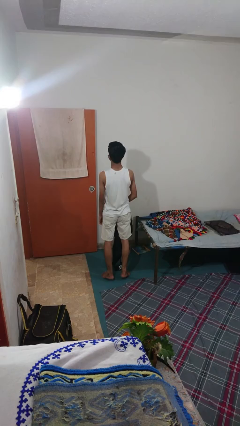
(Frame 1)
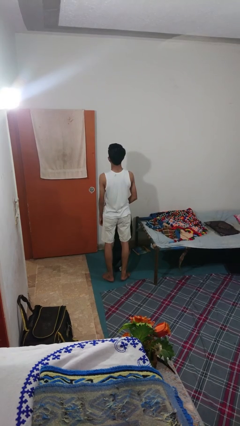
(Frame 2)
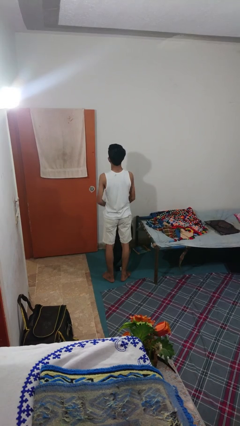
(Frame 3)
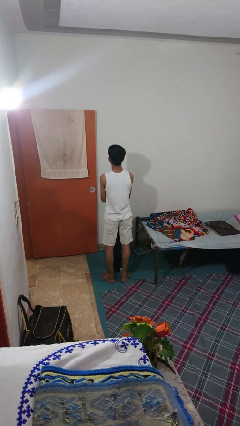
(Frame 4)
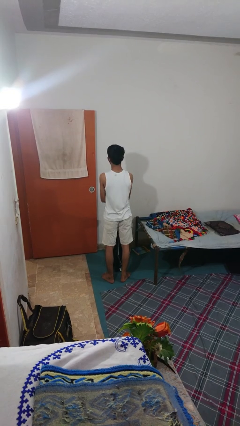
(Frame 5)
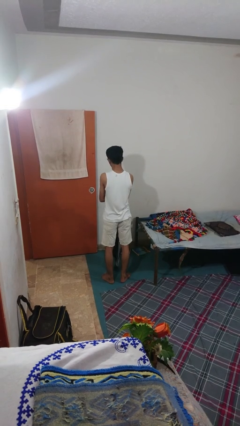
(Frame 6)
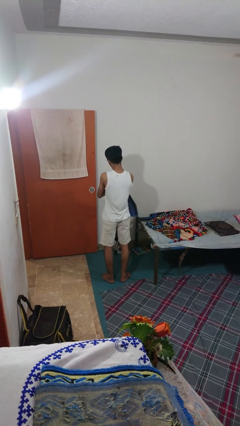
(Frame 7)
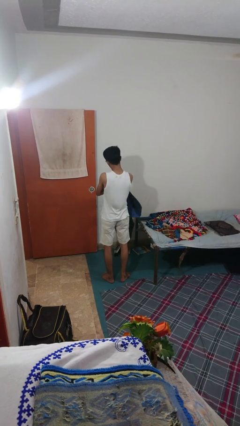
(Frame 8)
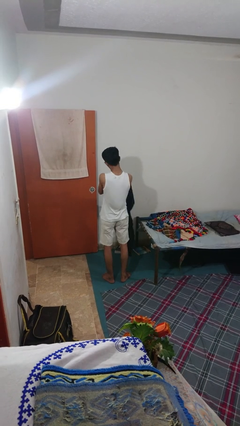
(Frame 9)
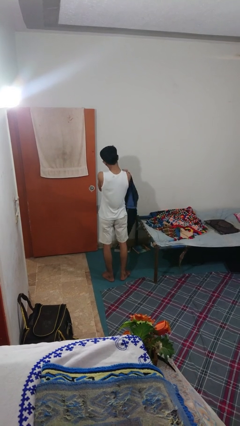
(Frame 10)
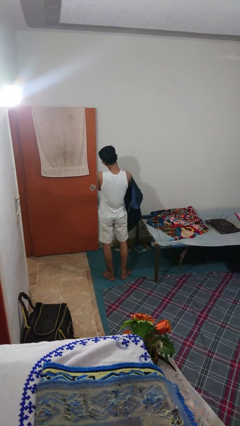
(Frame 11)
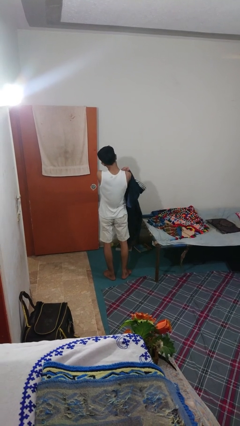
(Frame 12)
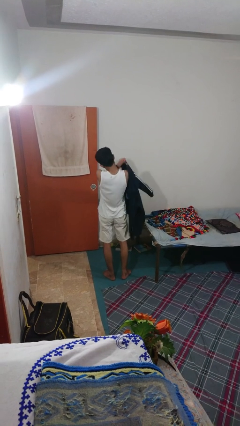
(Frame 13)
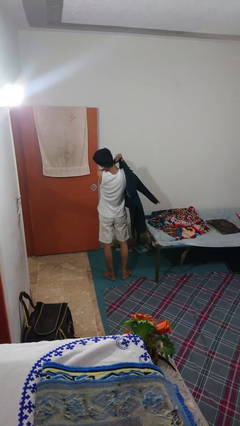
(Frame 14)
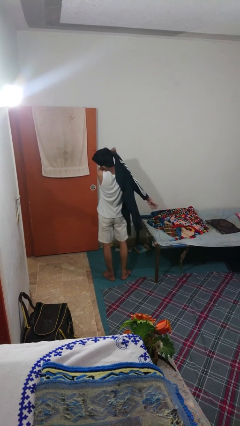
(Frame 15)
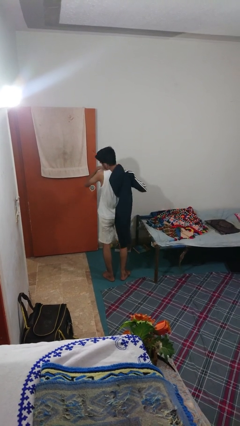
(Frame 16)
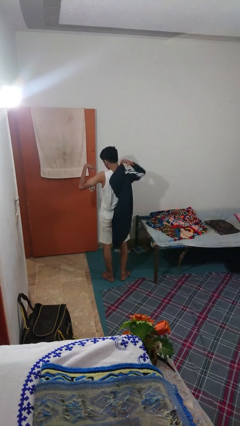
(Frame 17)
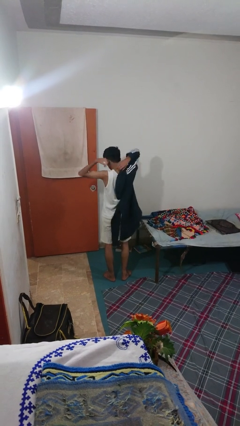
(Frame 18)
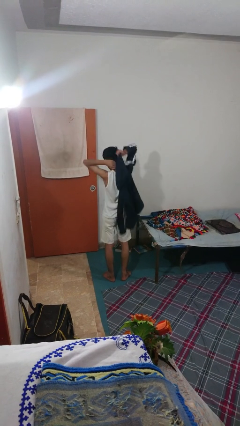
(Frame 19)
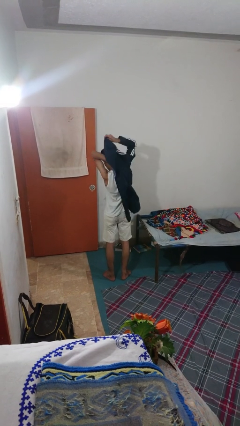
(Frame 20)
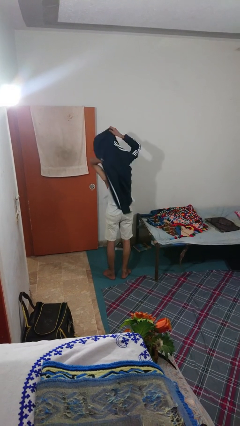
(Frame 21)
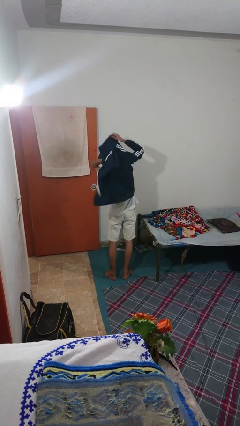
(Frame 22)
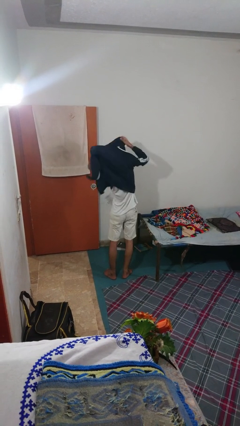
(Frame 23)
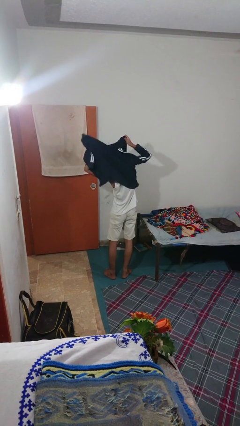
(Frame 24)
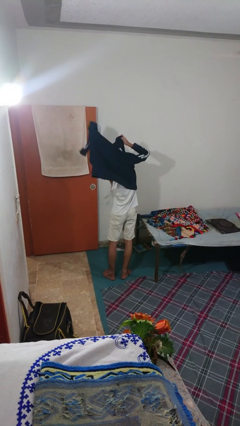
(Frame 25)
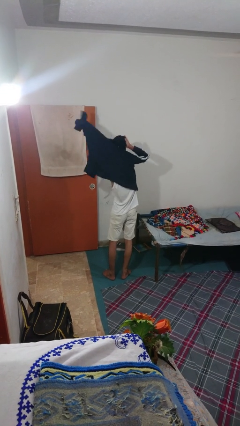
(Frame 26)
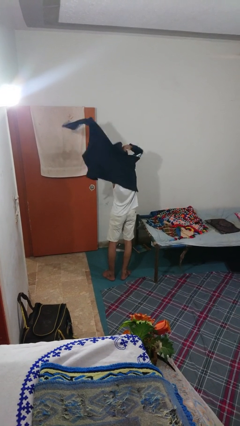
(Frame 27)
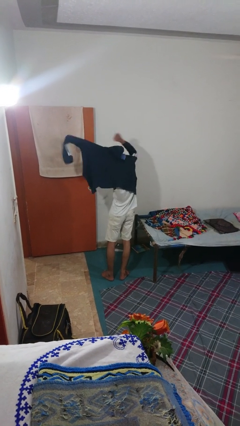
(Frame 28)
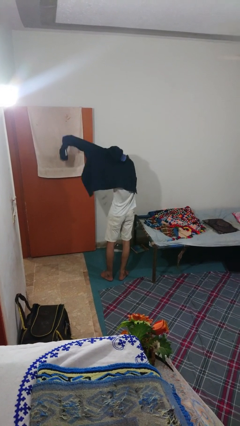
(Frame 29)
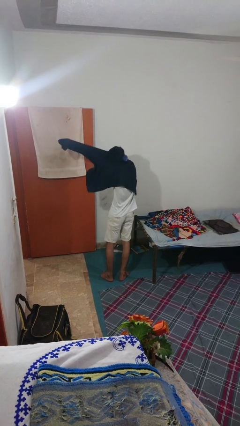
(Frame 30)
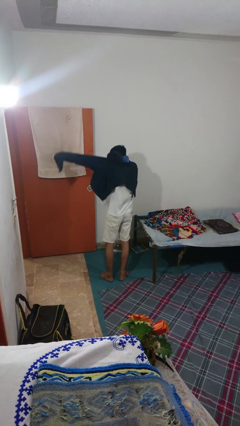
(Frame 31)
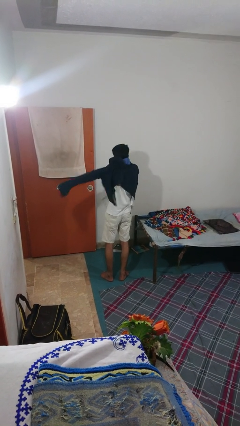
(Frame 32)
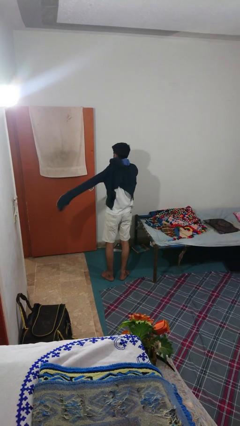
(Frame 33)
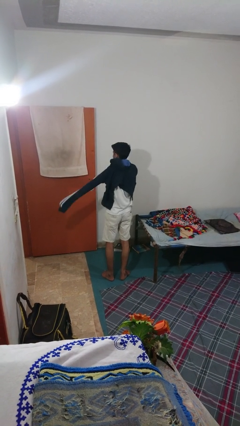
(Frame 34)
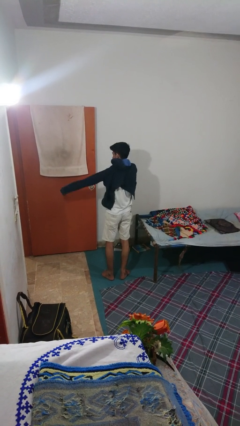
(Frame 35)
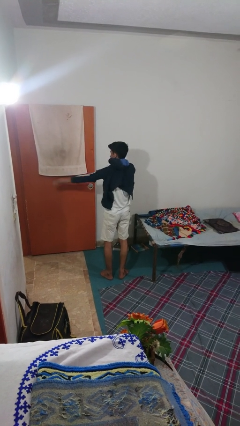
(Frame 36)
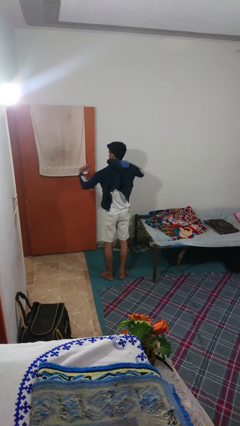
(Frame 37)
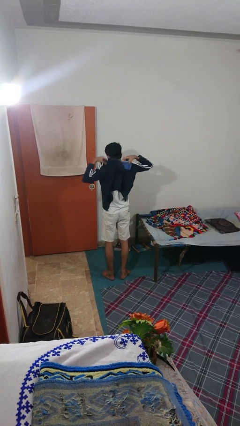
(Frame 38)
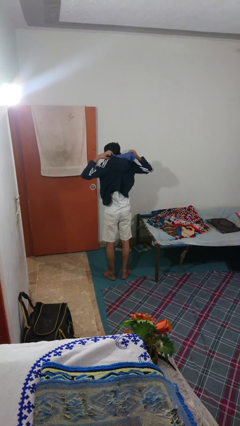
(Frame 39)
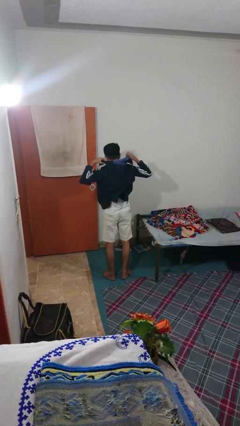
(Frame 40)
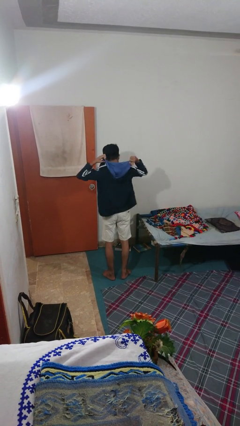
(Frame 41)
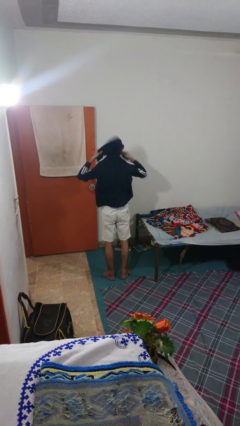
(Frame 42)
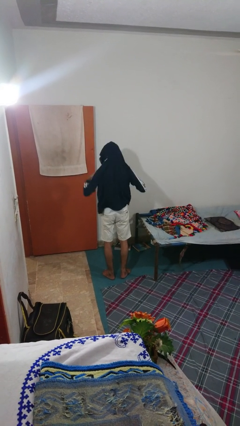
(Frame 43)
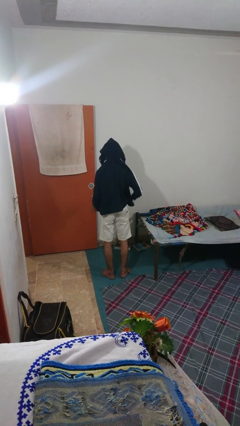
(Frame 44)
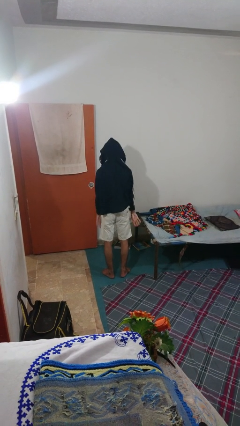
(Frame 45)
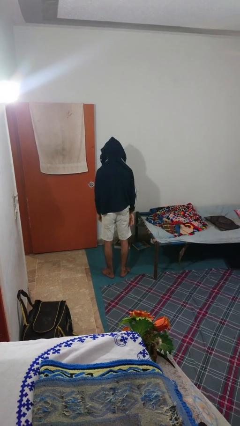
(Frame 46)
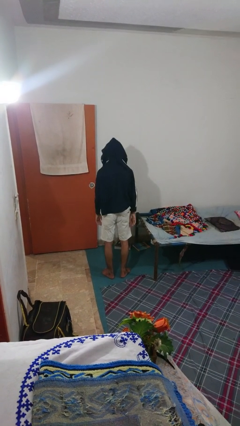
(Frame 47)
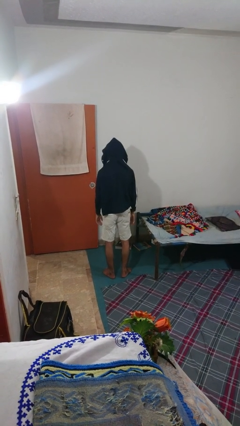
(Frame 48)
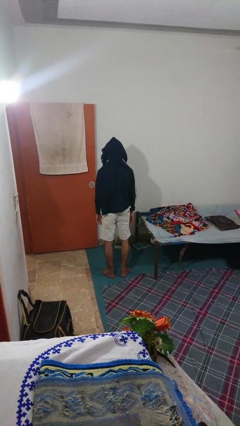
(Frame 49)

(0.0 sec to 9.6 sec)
person puts on hoodie

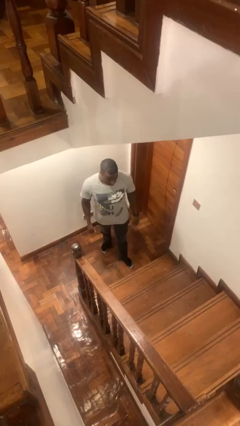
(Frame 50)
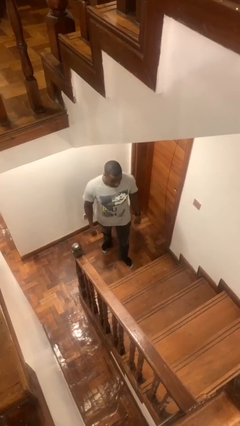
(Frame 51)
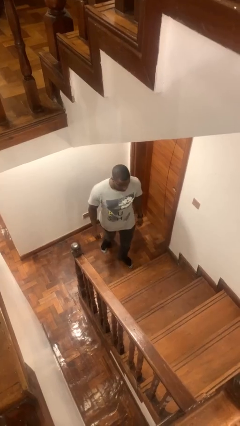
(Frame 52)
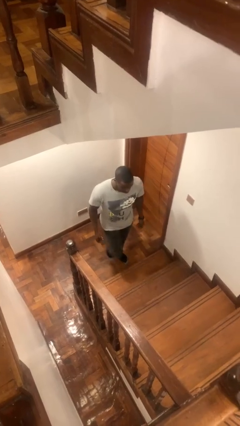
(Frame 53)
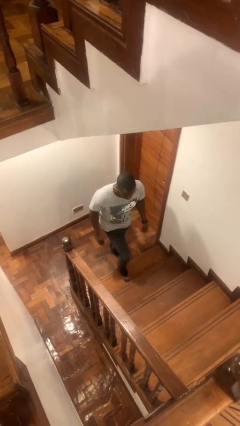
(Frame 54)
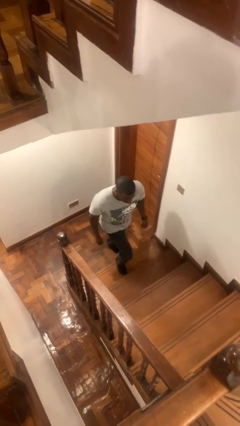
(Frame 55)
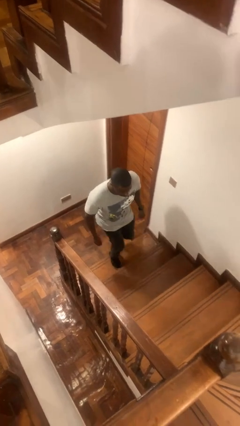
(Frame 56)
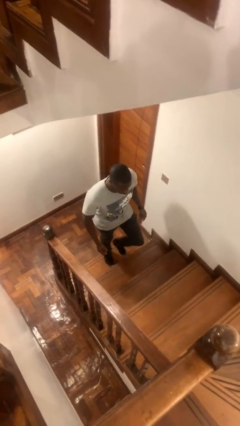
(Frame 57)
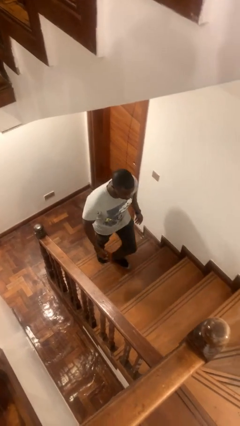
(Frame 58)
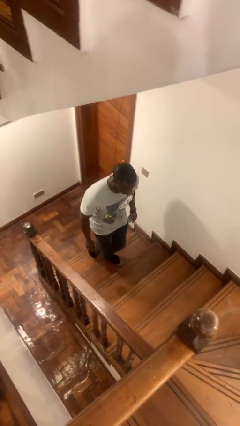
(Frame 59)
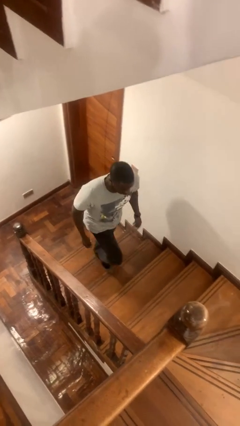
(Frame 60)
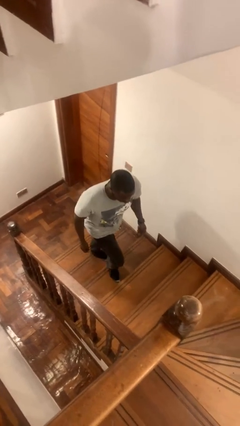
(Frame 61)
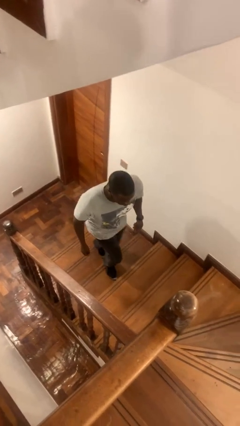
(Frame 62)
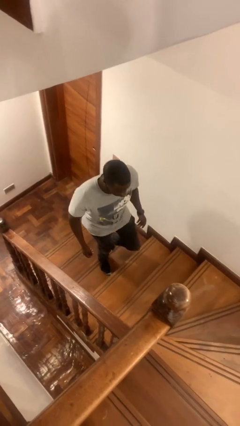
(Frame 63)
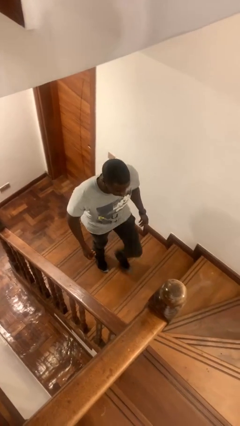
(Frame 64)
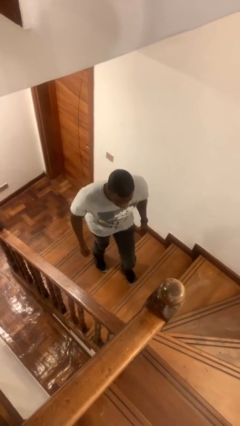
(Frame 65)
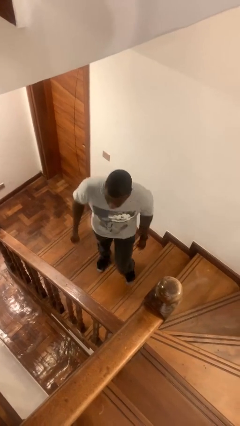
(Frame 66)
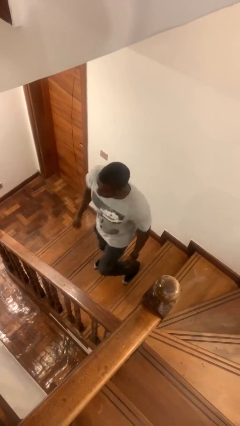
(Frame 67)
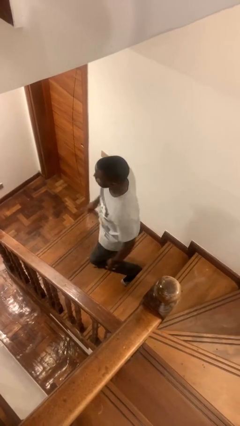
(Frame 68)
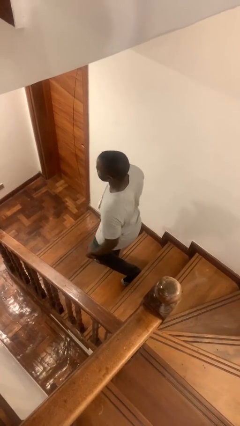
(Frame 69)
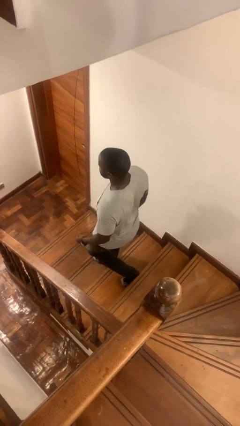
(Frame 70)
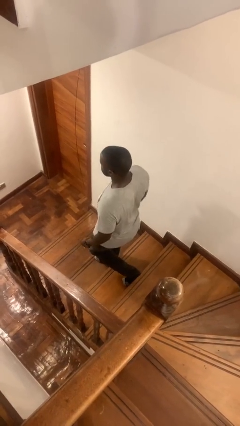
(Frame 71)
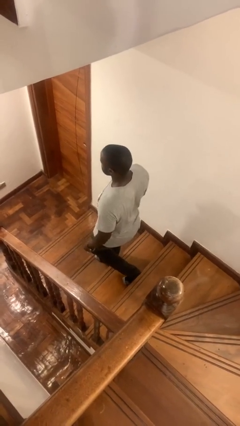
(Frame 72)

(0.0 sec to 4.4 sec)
person climbs up stairs

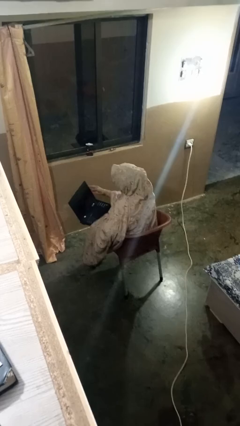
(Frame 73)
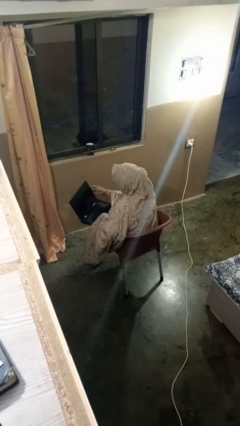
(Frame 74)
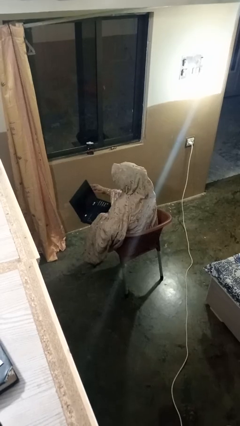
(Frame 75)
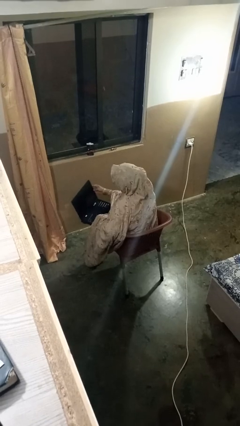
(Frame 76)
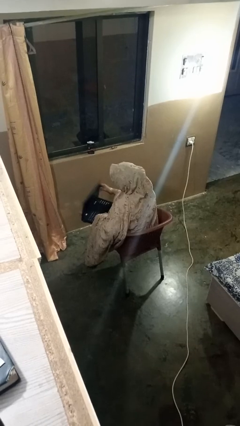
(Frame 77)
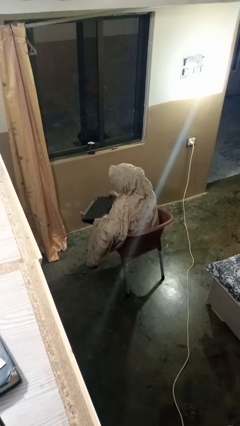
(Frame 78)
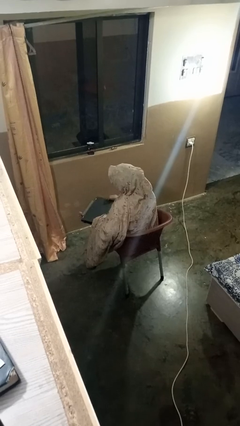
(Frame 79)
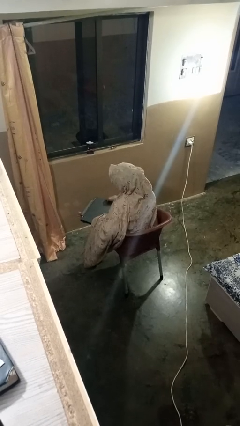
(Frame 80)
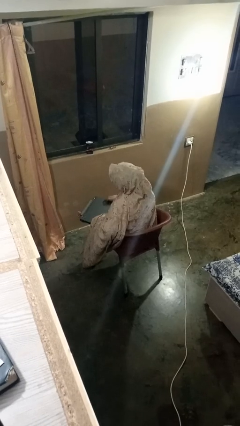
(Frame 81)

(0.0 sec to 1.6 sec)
person closes laptop

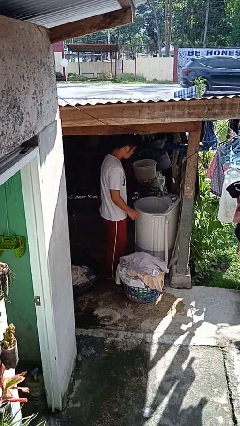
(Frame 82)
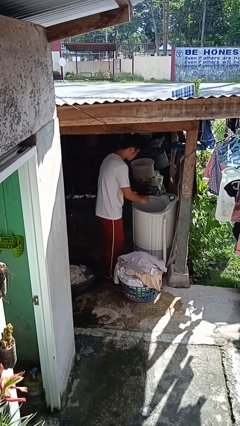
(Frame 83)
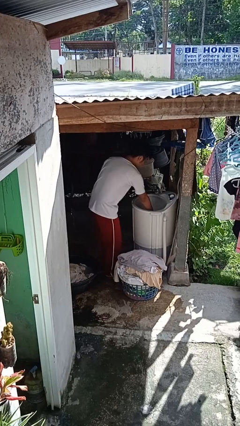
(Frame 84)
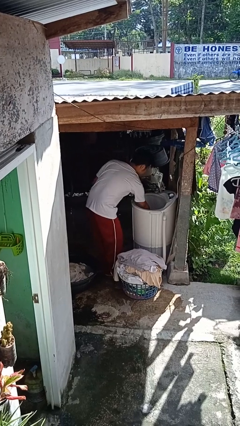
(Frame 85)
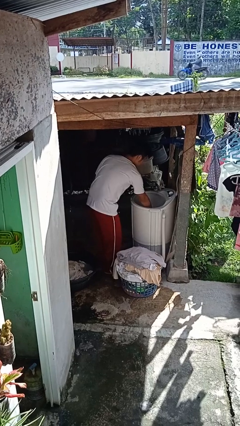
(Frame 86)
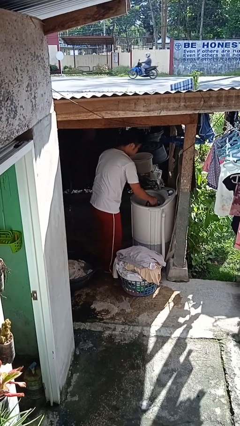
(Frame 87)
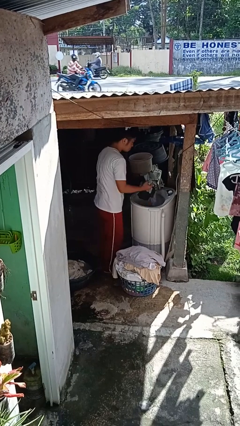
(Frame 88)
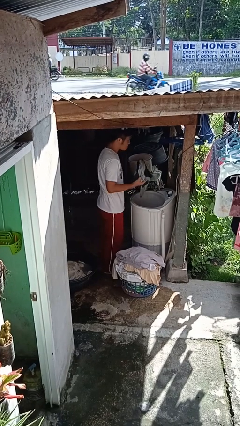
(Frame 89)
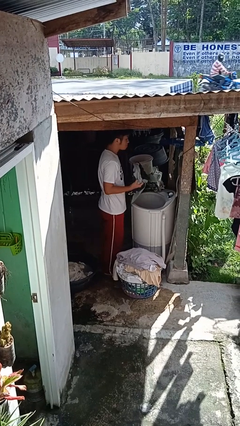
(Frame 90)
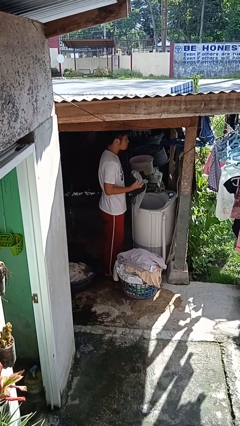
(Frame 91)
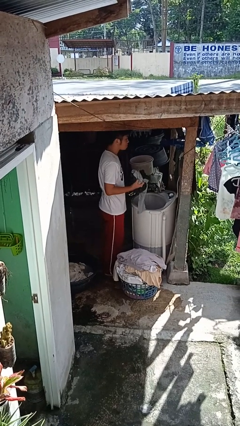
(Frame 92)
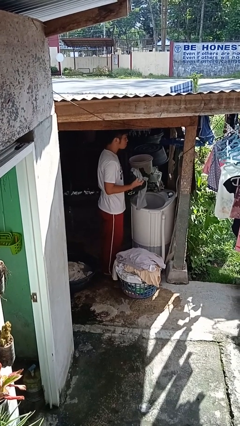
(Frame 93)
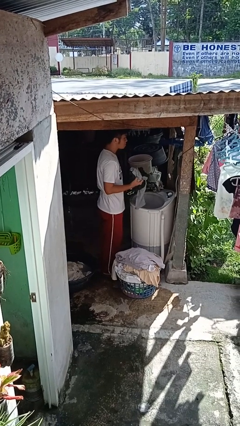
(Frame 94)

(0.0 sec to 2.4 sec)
person unloads clotheswasher
